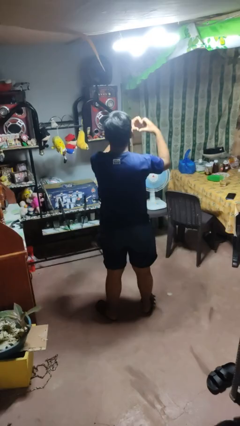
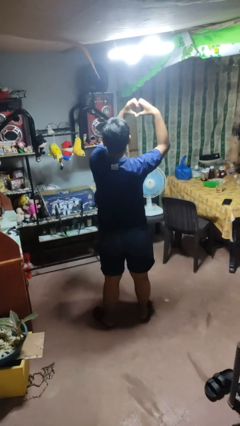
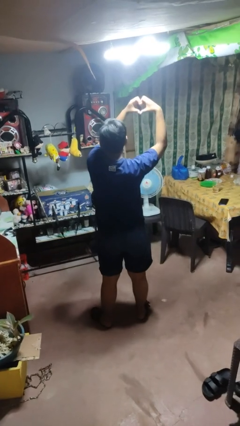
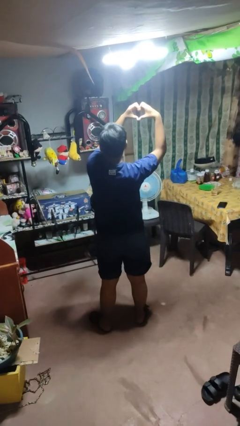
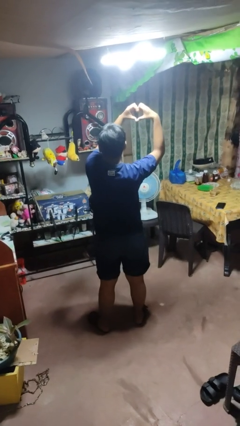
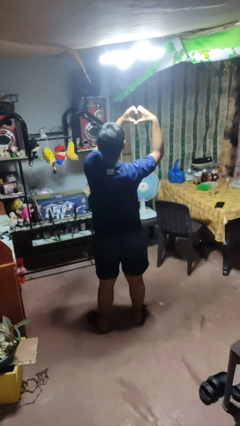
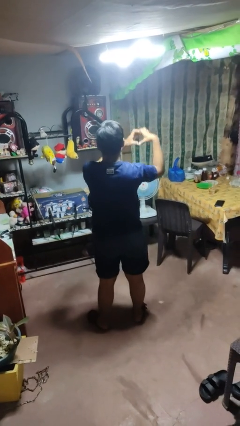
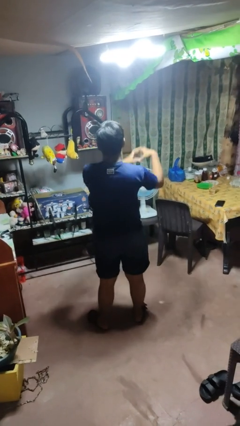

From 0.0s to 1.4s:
person gestures heart

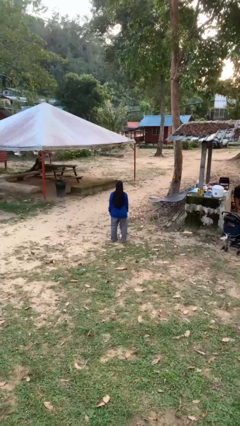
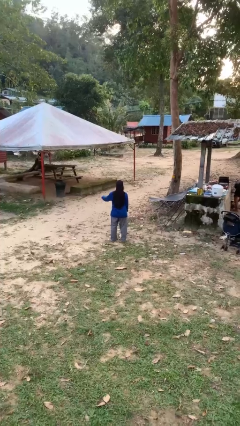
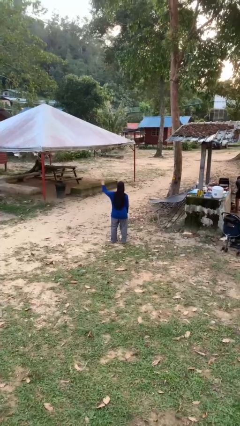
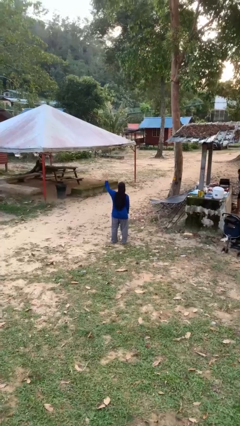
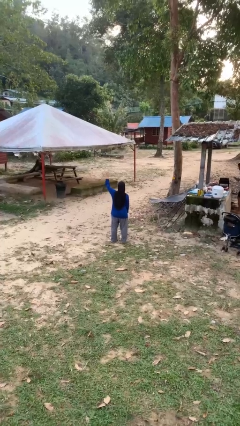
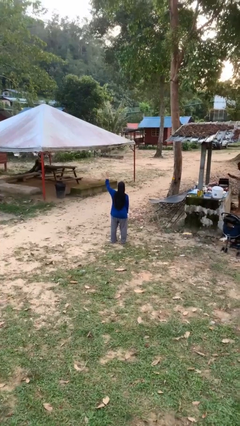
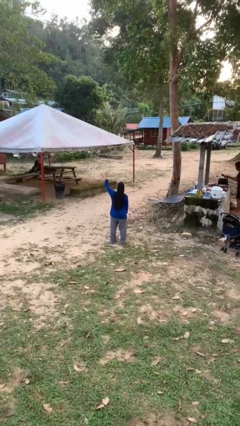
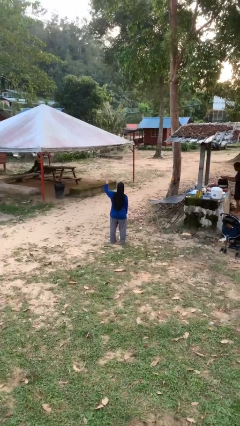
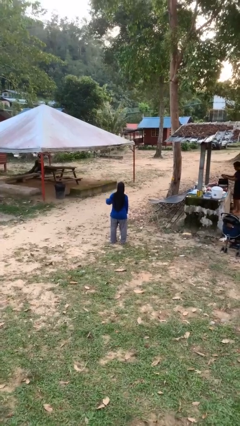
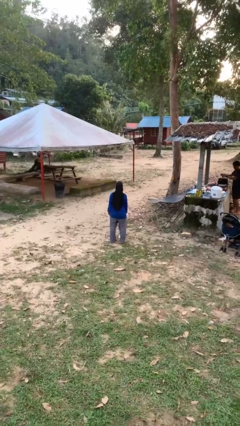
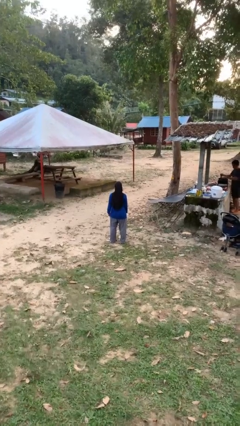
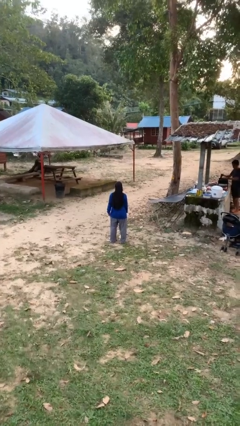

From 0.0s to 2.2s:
person gestures number four

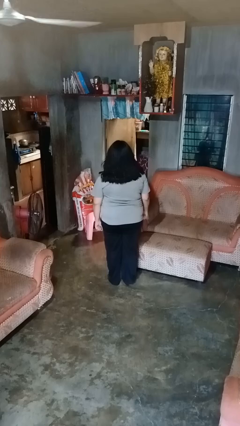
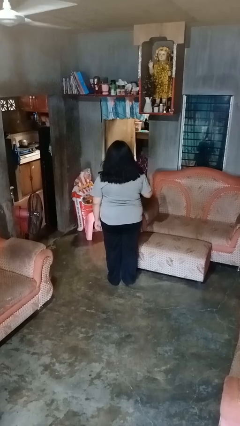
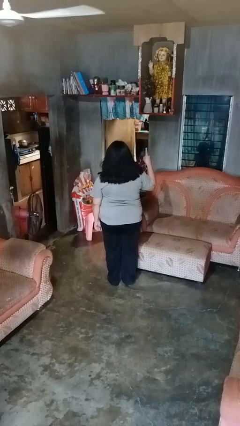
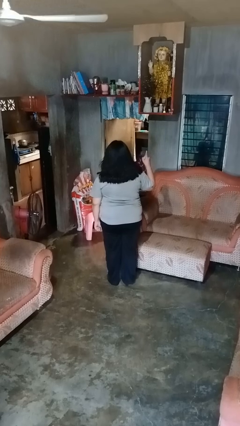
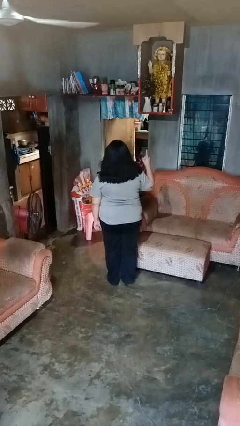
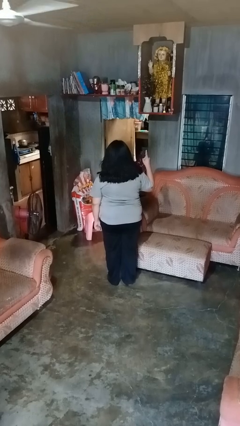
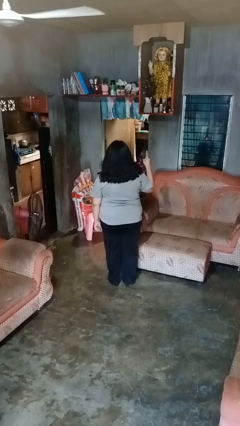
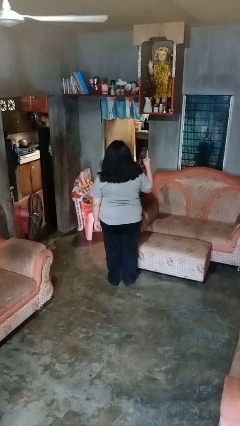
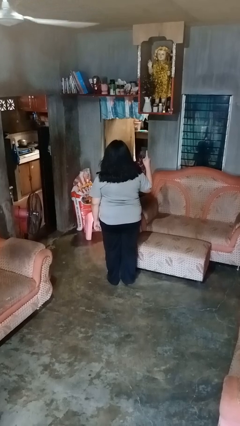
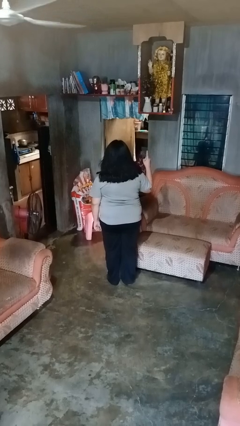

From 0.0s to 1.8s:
person gestures number one

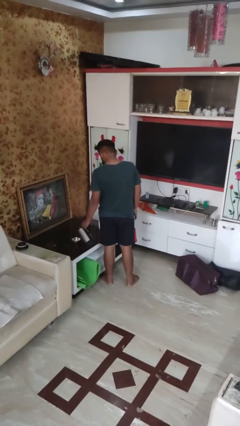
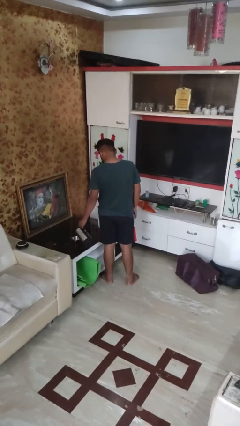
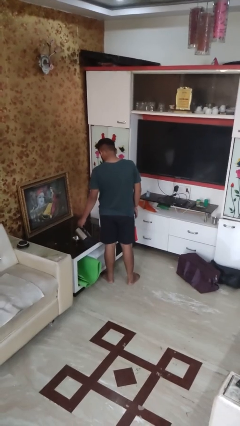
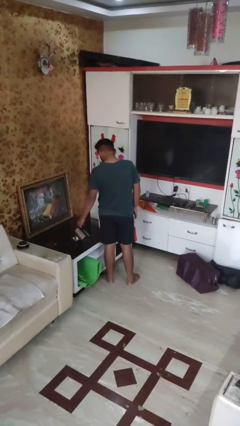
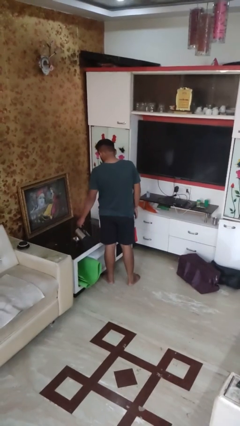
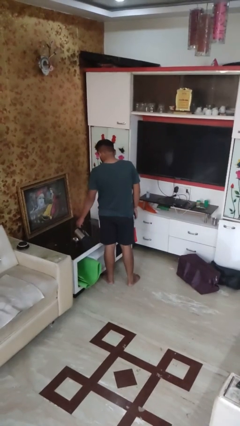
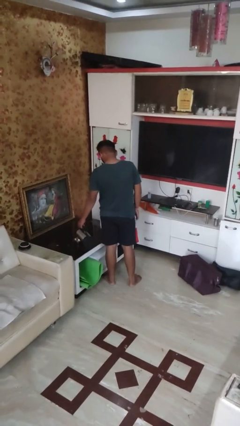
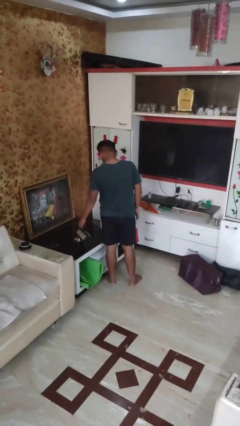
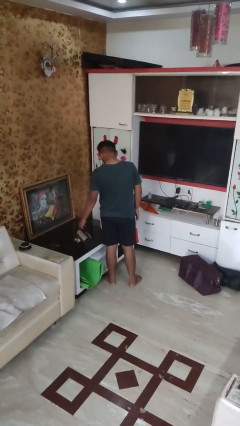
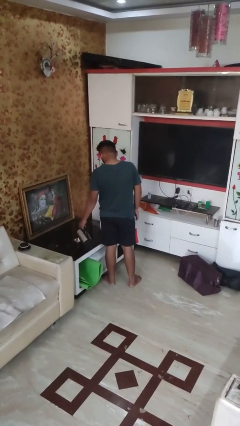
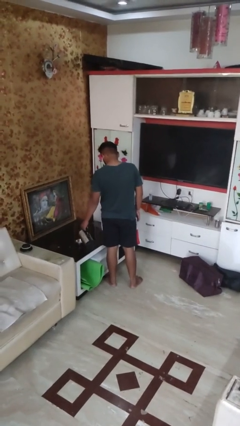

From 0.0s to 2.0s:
person pours into bowl

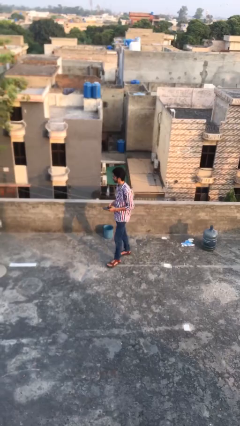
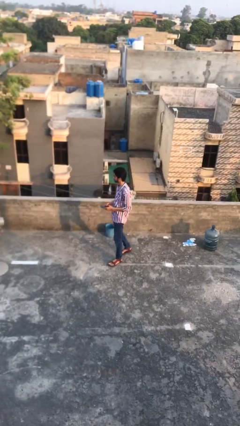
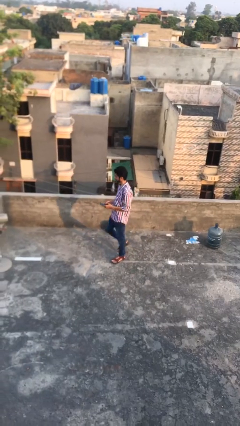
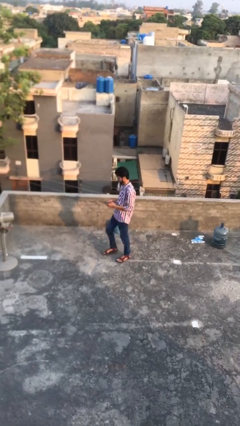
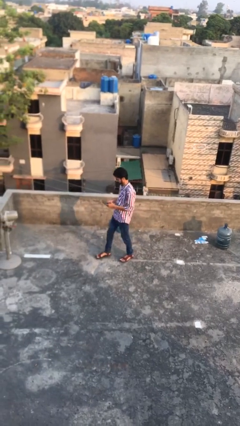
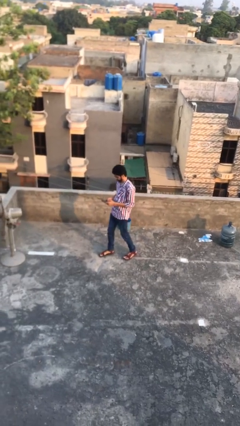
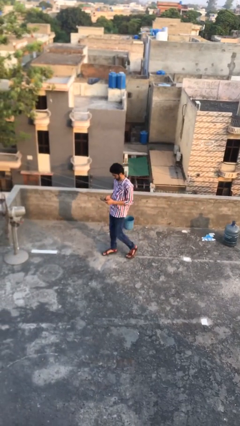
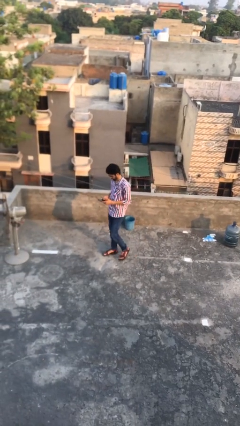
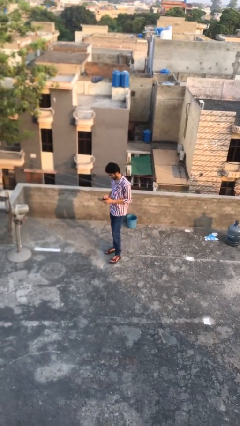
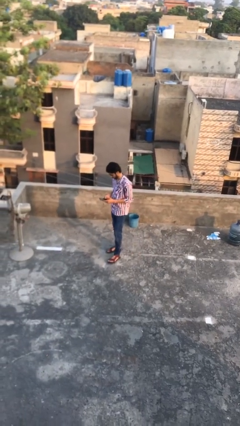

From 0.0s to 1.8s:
person texts on phone

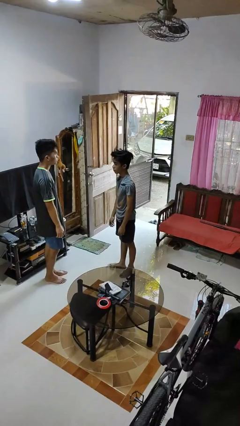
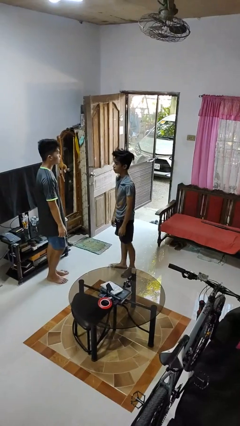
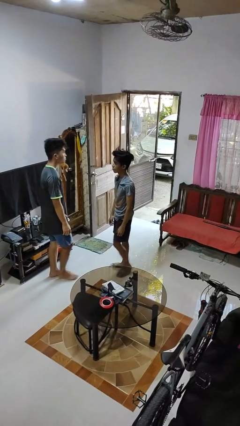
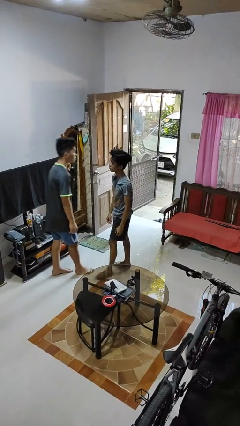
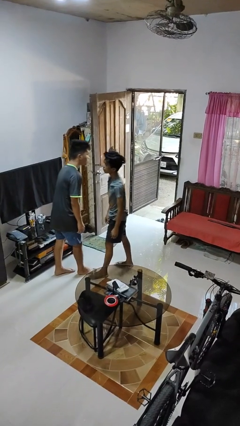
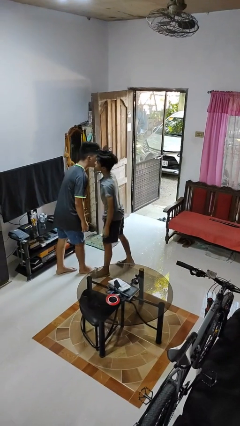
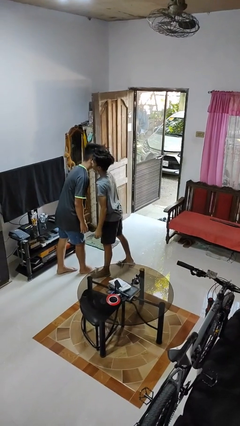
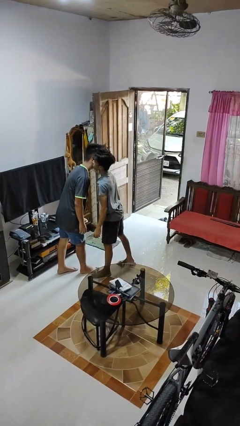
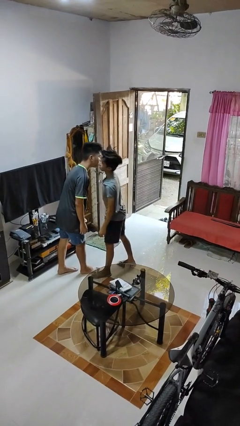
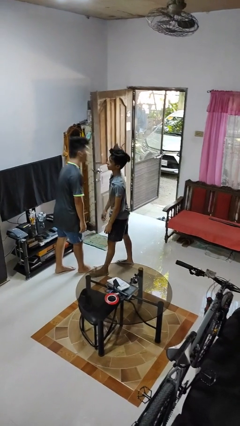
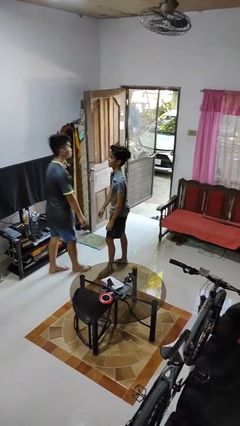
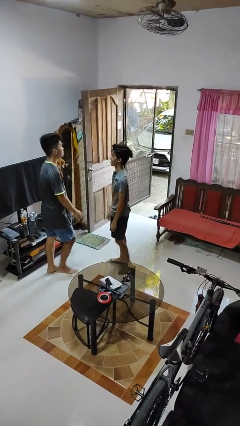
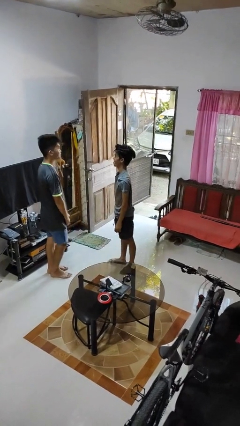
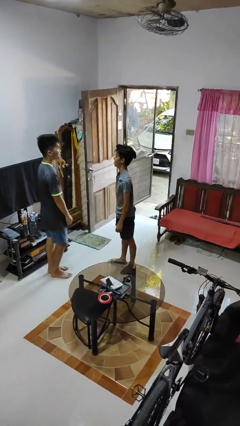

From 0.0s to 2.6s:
person kisses cheek of person

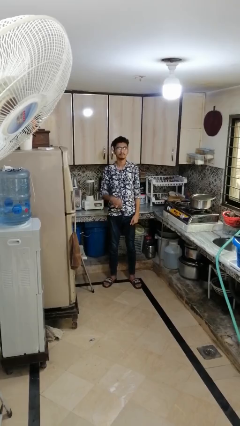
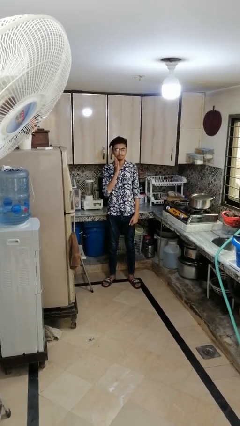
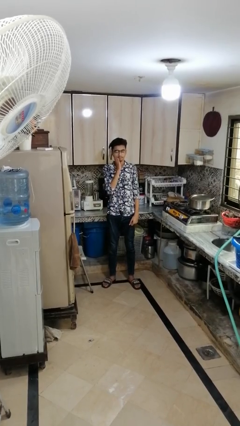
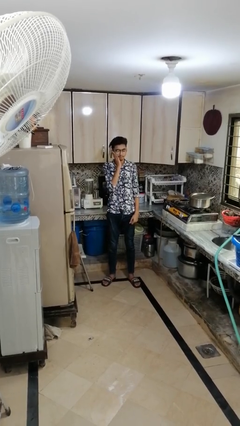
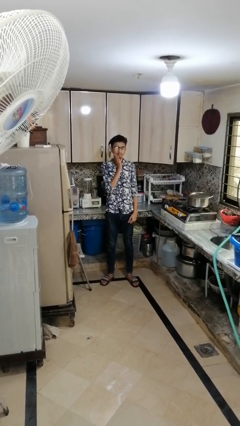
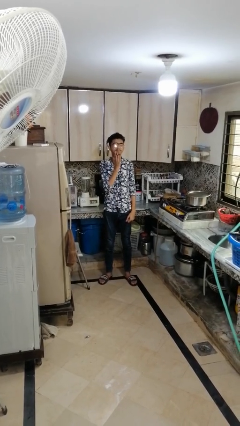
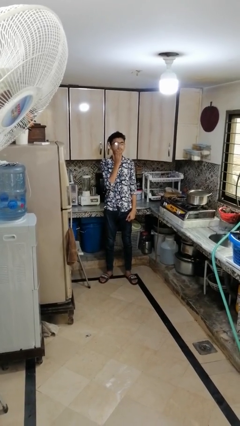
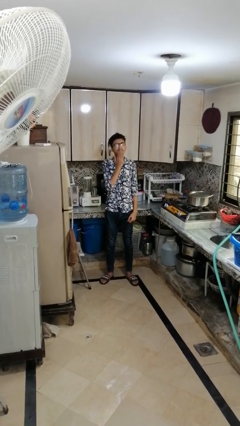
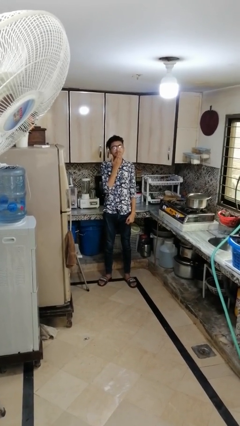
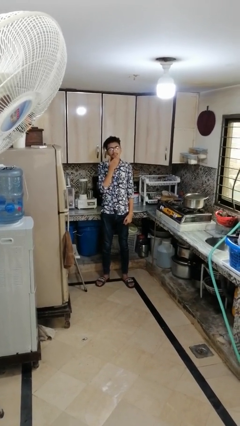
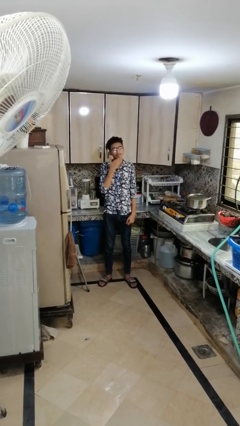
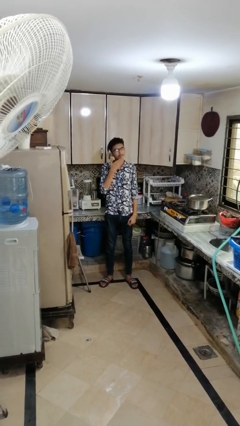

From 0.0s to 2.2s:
person strokes chin

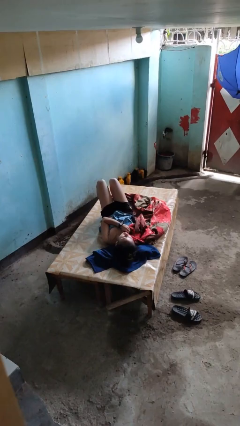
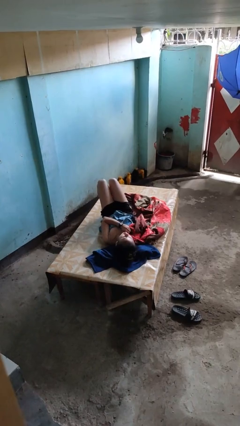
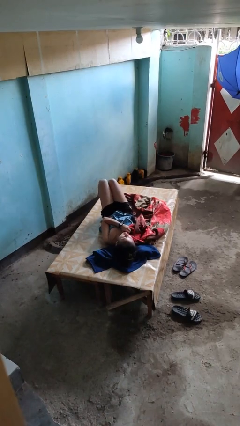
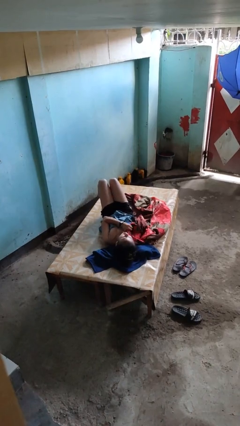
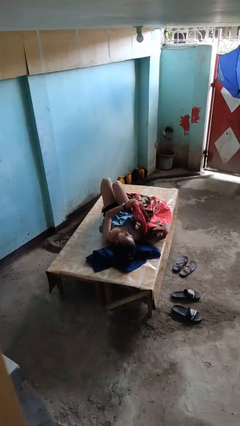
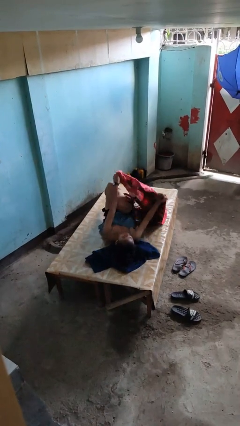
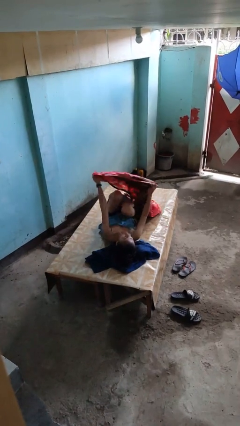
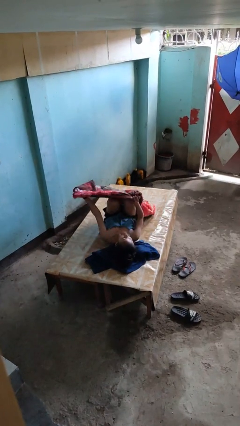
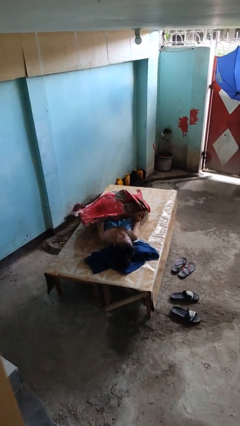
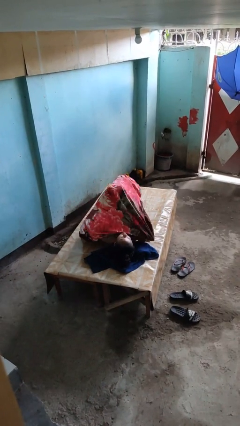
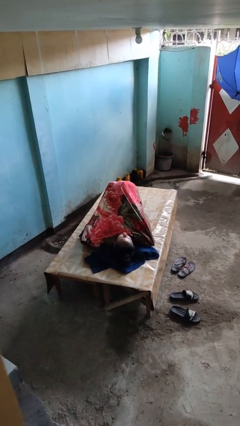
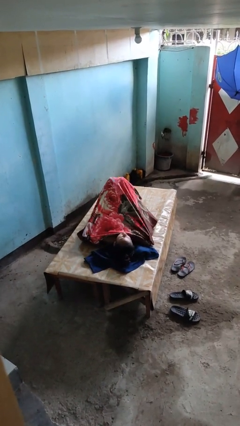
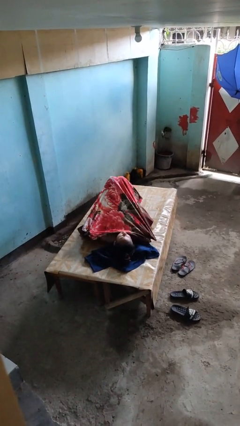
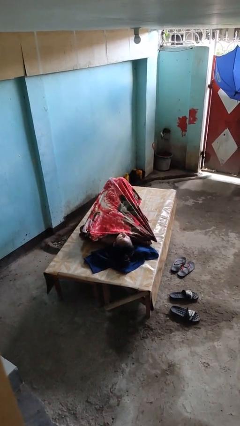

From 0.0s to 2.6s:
person covers with blanket
